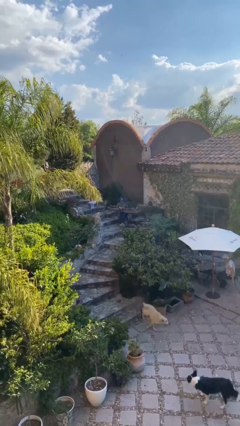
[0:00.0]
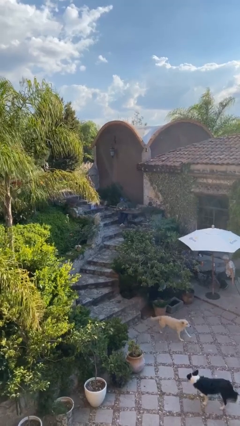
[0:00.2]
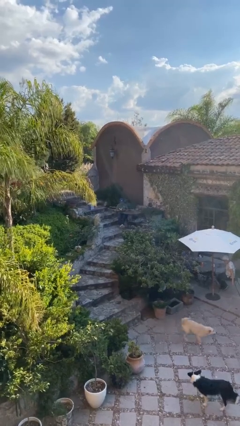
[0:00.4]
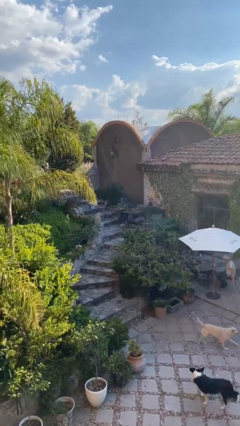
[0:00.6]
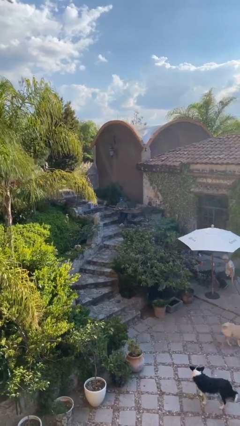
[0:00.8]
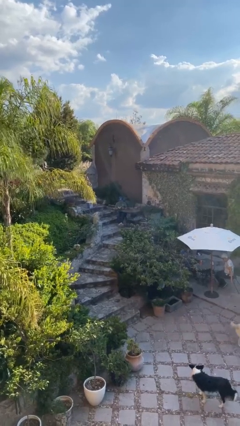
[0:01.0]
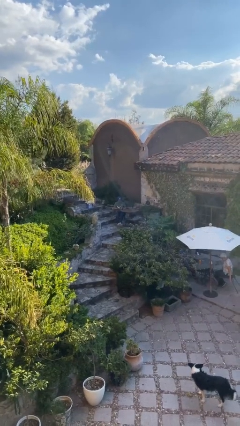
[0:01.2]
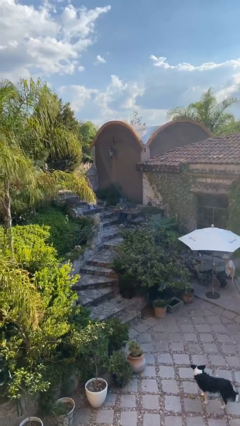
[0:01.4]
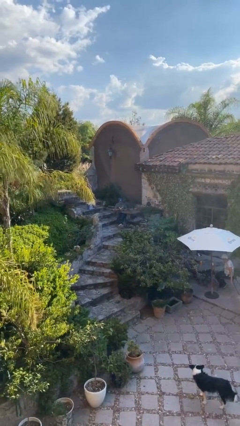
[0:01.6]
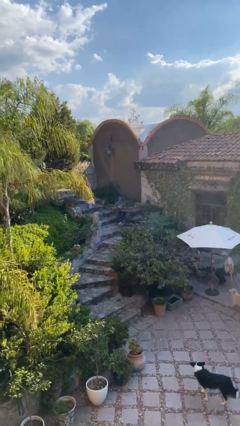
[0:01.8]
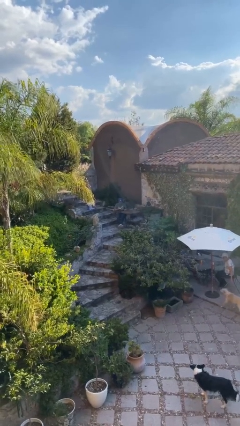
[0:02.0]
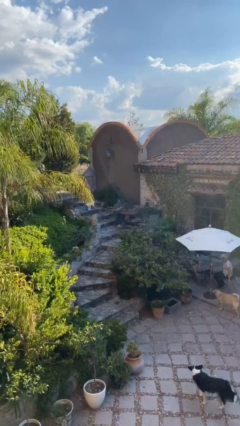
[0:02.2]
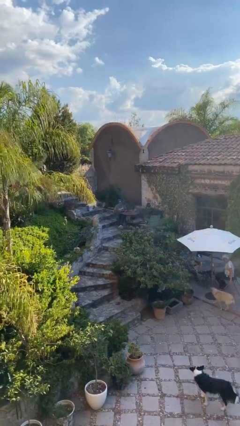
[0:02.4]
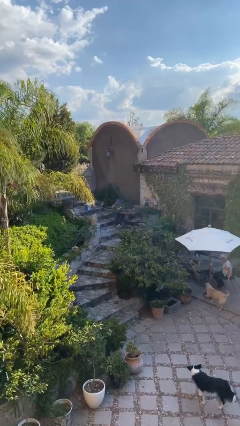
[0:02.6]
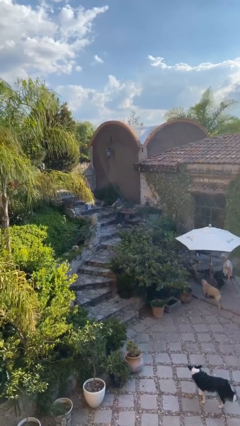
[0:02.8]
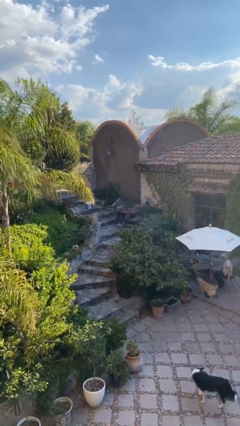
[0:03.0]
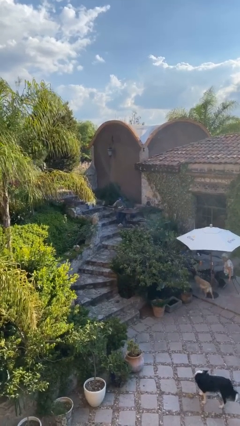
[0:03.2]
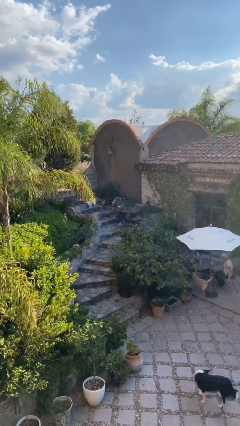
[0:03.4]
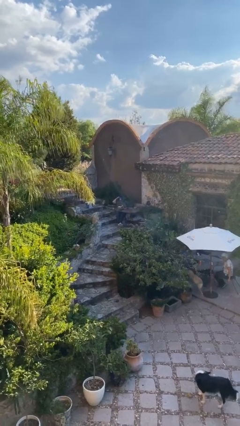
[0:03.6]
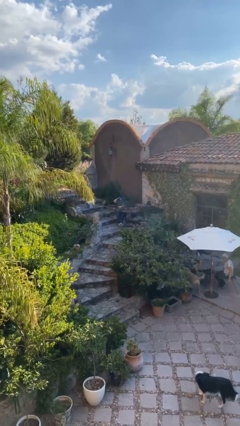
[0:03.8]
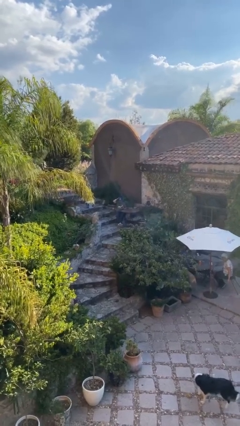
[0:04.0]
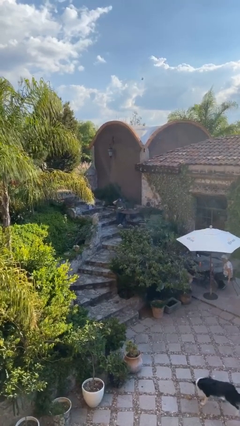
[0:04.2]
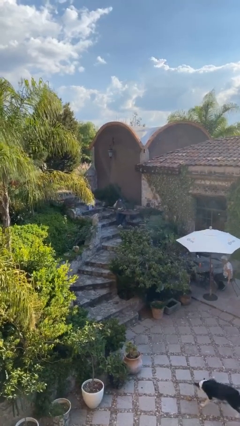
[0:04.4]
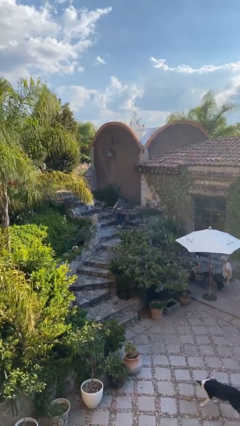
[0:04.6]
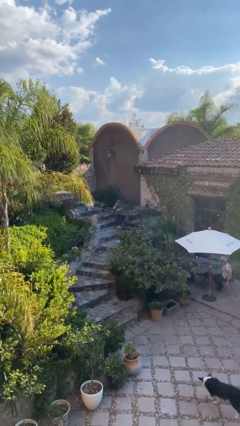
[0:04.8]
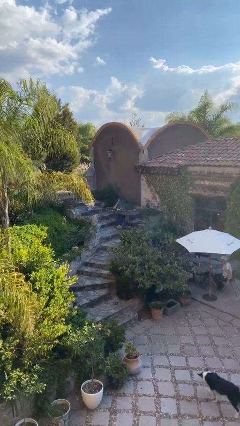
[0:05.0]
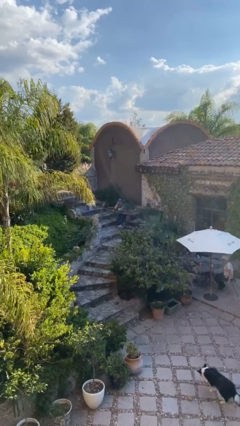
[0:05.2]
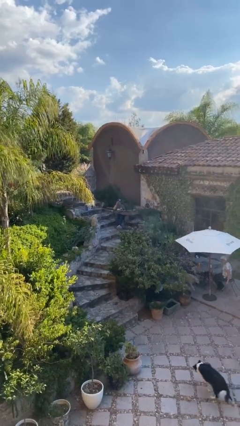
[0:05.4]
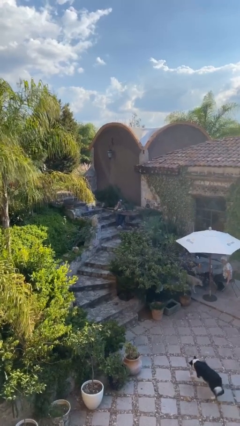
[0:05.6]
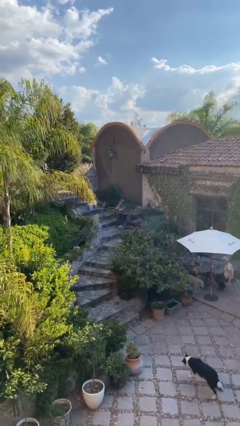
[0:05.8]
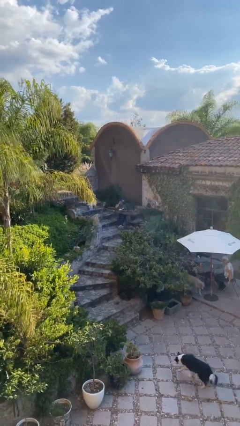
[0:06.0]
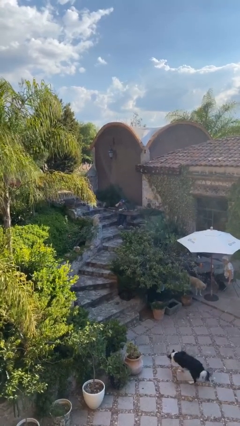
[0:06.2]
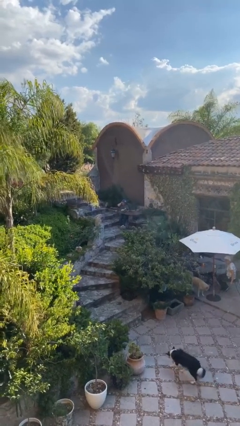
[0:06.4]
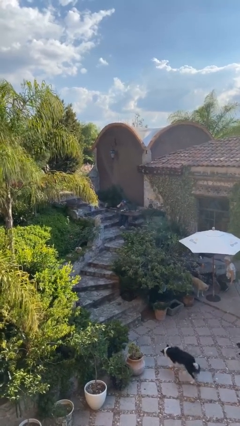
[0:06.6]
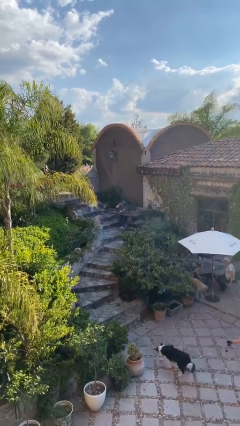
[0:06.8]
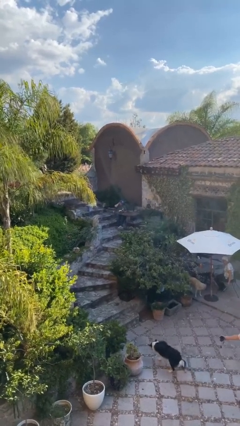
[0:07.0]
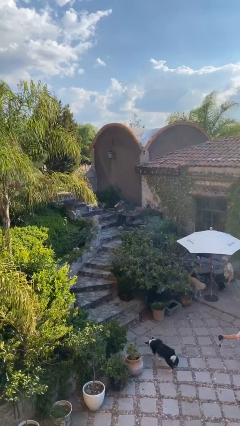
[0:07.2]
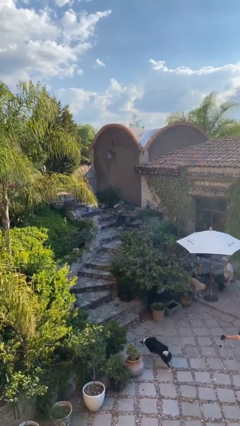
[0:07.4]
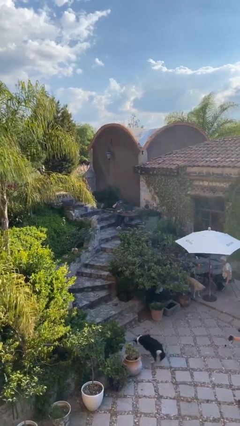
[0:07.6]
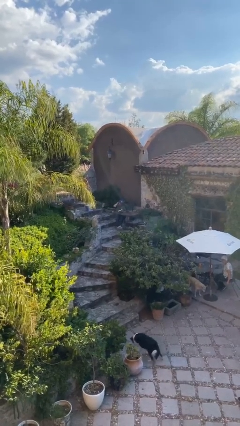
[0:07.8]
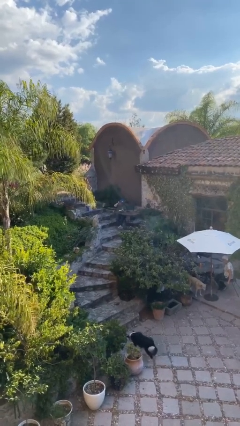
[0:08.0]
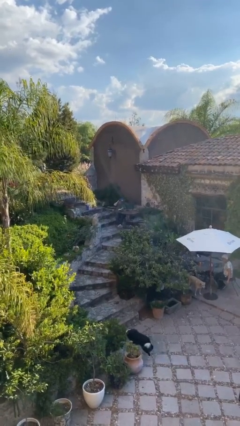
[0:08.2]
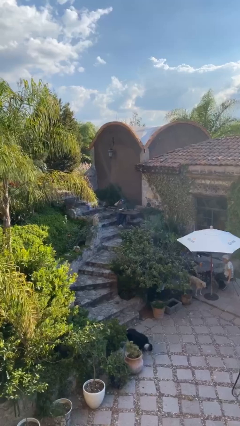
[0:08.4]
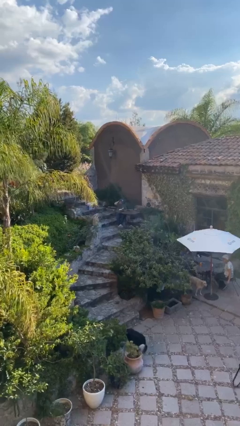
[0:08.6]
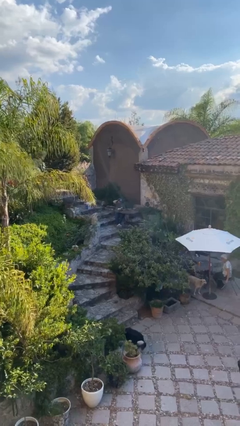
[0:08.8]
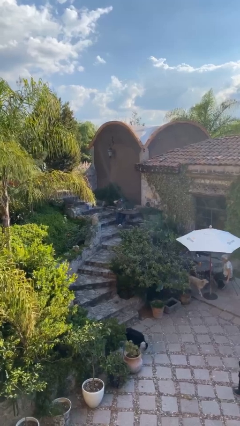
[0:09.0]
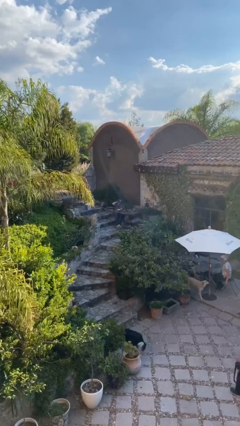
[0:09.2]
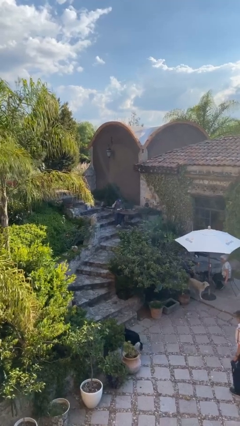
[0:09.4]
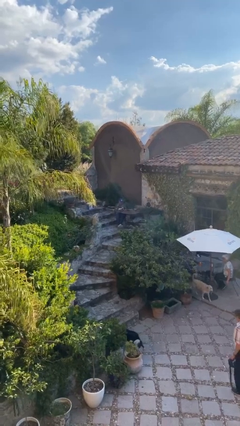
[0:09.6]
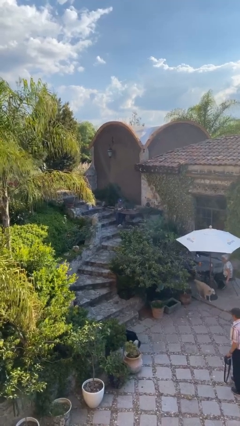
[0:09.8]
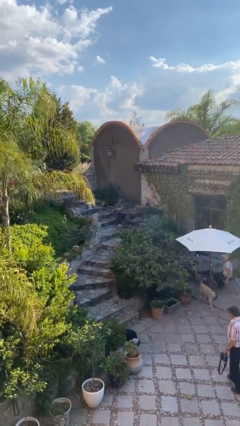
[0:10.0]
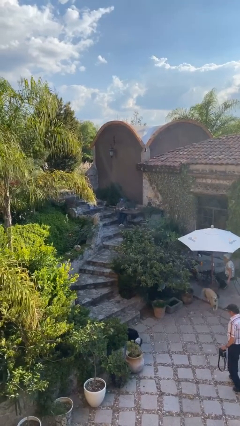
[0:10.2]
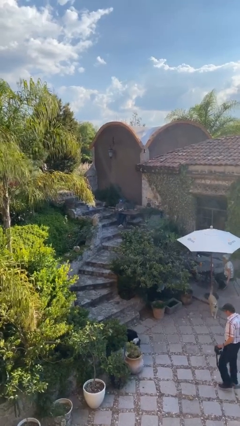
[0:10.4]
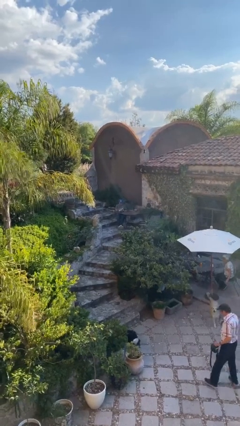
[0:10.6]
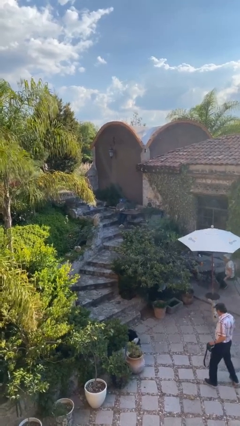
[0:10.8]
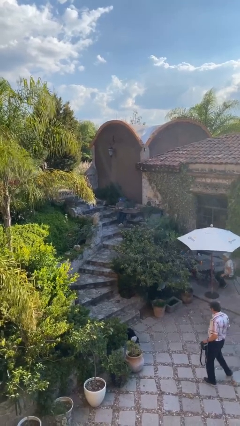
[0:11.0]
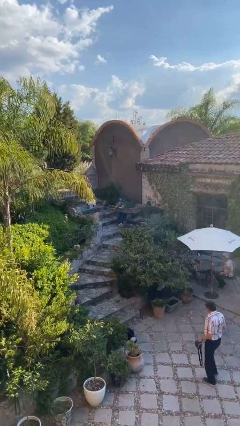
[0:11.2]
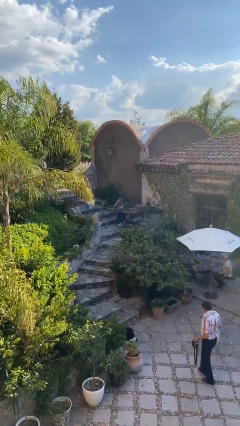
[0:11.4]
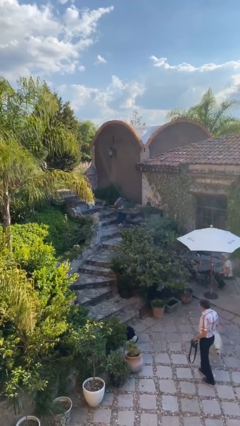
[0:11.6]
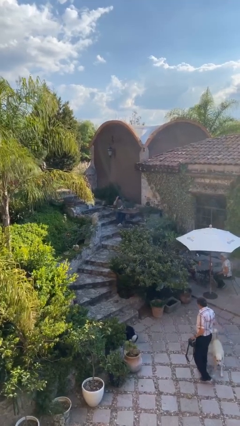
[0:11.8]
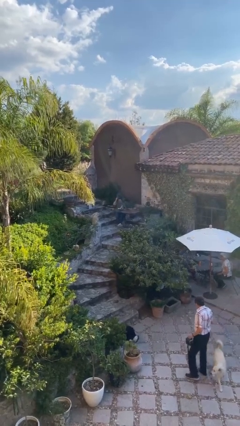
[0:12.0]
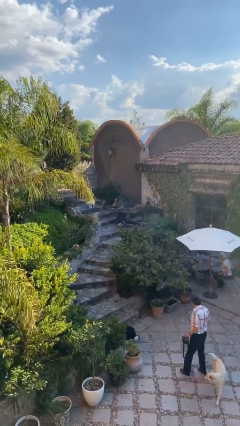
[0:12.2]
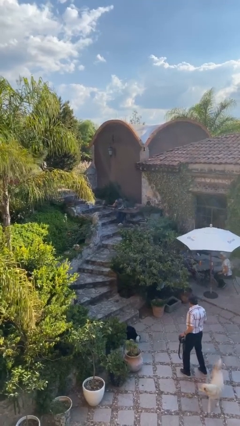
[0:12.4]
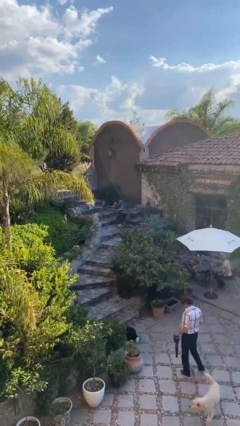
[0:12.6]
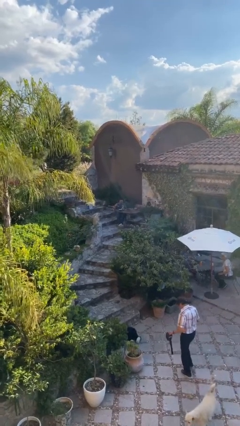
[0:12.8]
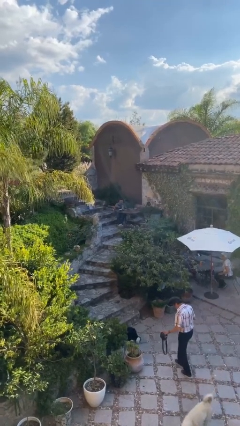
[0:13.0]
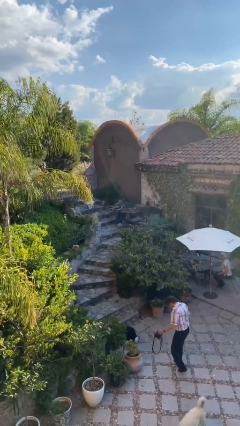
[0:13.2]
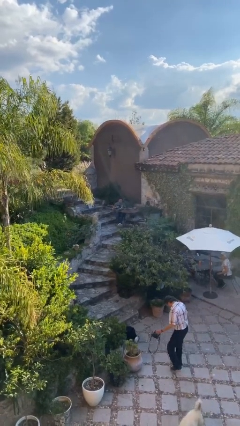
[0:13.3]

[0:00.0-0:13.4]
person reads document

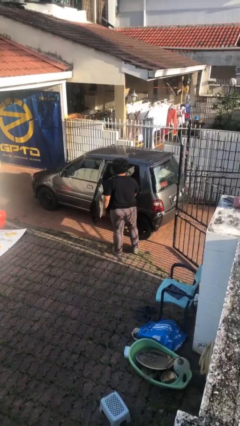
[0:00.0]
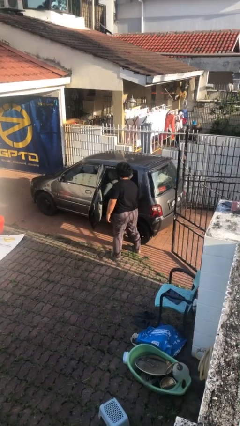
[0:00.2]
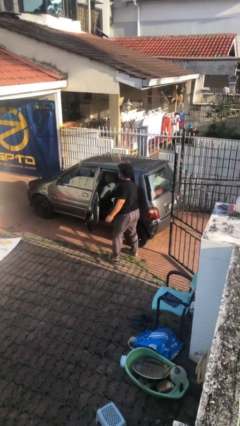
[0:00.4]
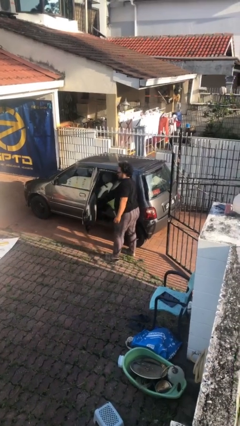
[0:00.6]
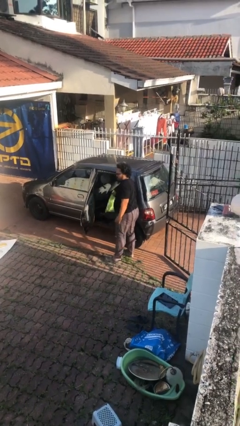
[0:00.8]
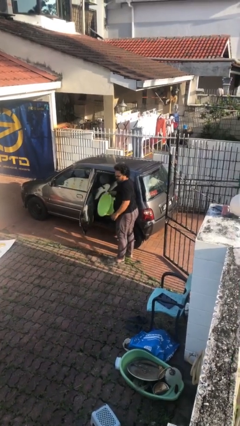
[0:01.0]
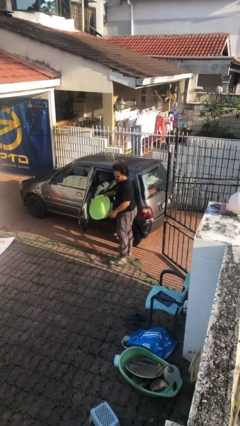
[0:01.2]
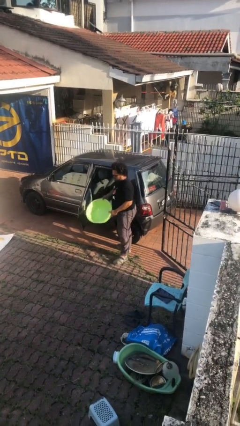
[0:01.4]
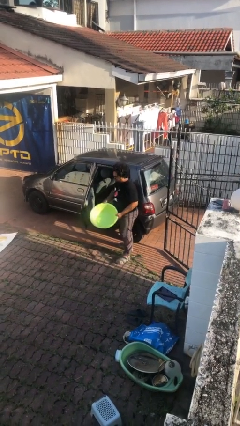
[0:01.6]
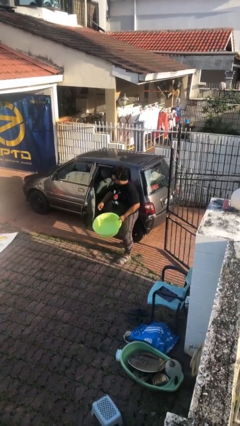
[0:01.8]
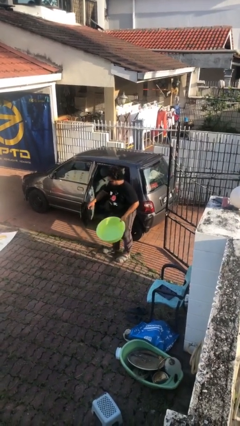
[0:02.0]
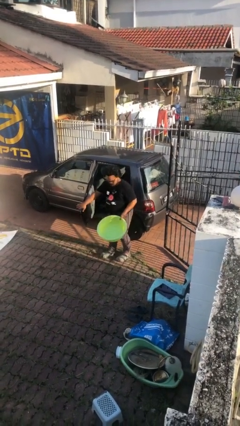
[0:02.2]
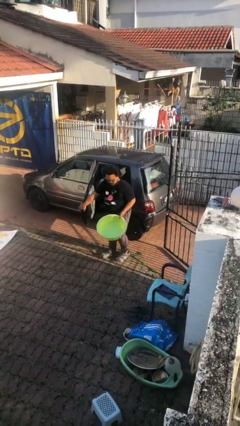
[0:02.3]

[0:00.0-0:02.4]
person unloads car

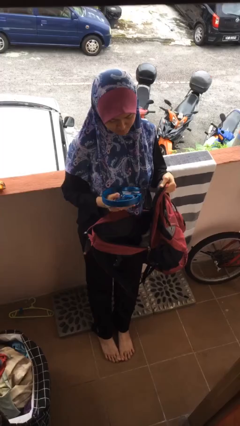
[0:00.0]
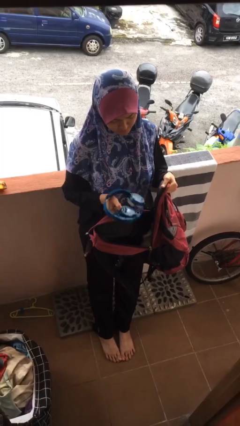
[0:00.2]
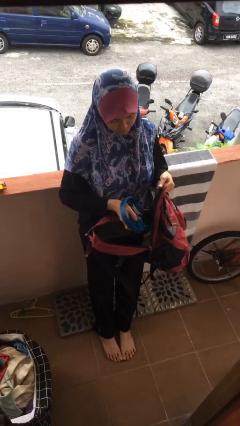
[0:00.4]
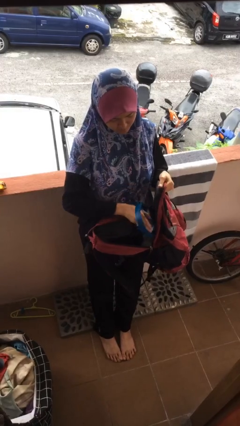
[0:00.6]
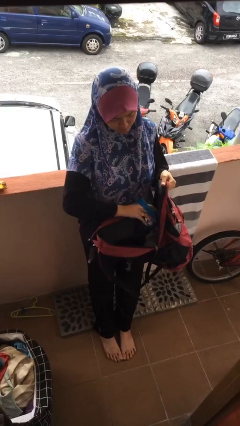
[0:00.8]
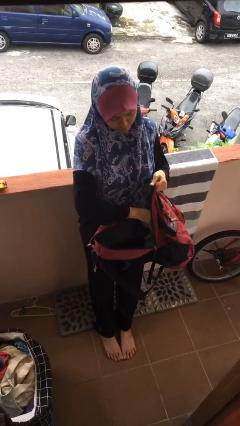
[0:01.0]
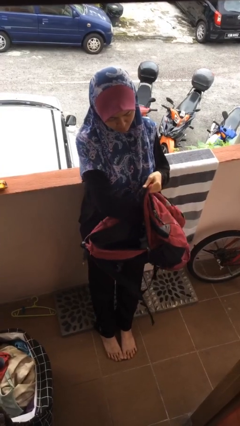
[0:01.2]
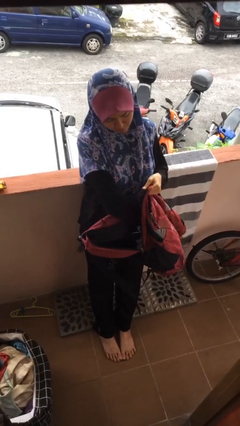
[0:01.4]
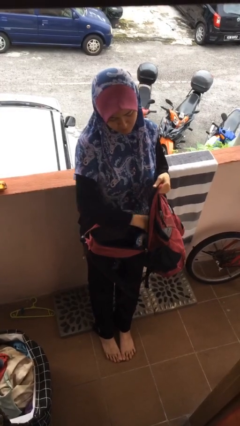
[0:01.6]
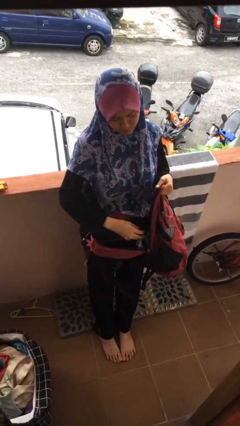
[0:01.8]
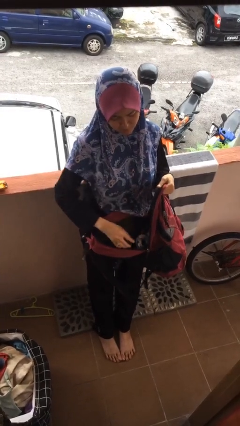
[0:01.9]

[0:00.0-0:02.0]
person puts object into backpack

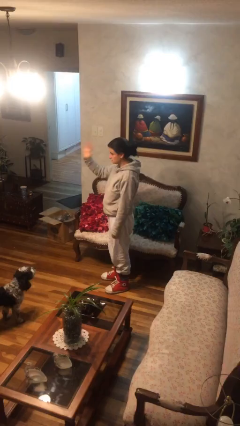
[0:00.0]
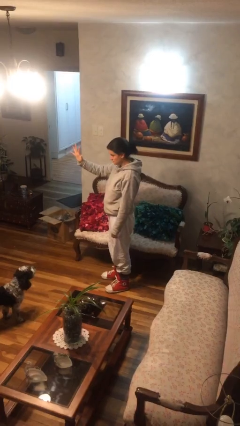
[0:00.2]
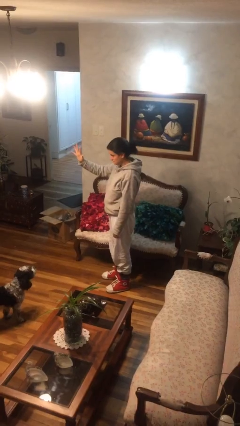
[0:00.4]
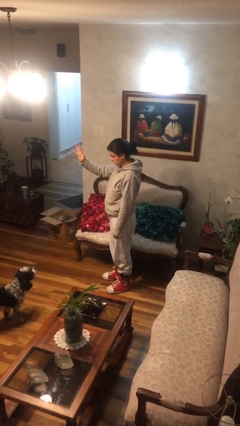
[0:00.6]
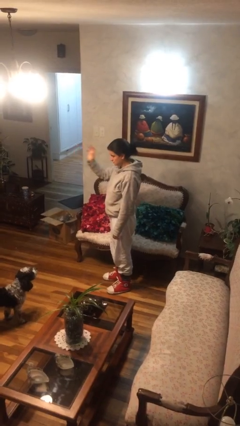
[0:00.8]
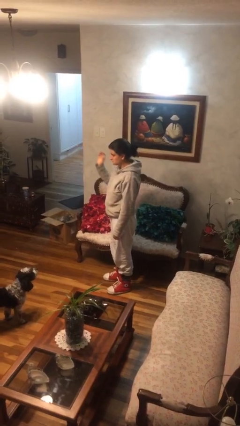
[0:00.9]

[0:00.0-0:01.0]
person gestures number five
